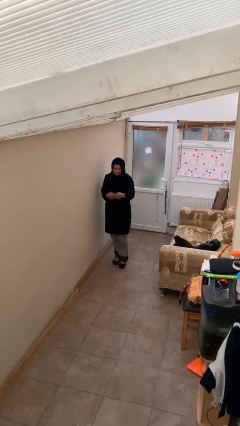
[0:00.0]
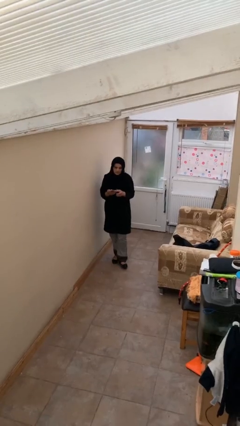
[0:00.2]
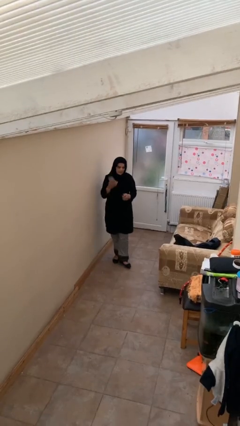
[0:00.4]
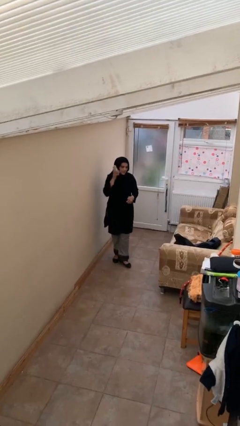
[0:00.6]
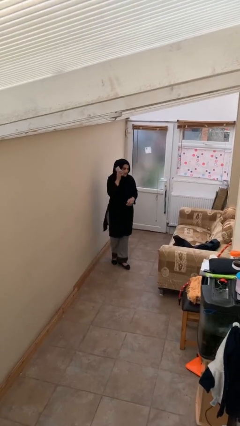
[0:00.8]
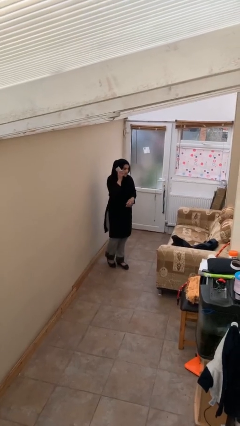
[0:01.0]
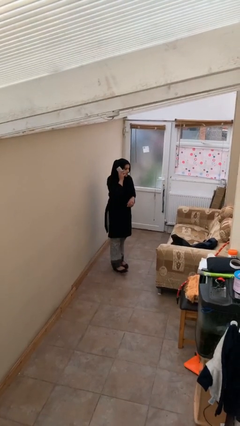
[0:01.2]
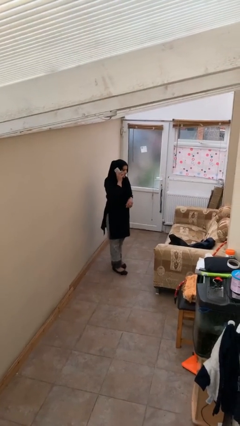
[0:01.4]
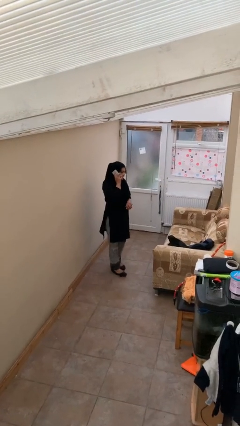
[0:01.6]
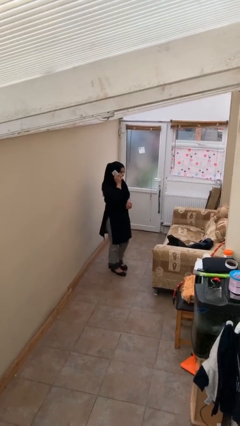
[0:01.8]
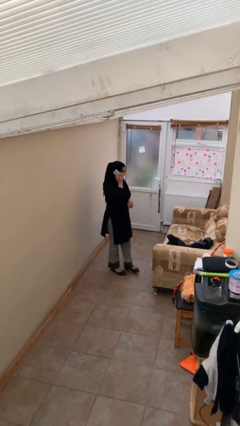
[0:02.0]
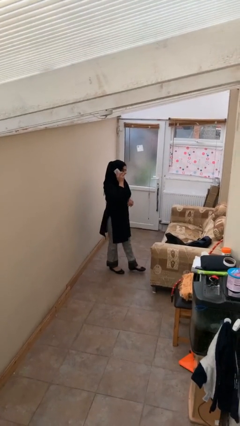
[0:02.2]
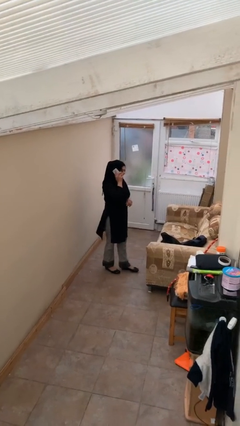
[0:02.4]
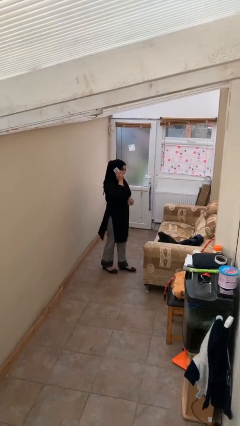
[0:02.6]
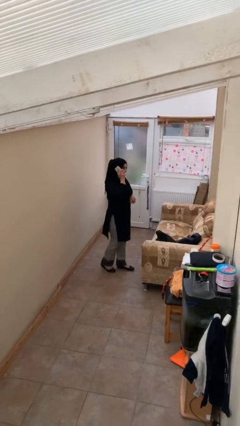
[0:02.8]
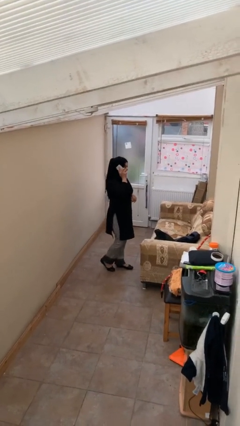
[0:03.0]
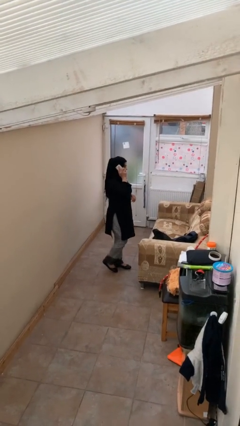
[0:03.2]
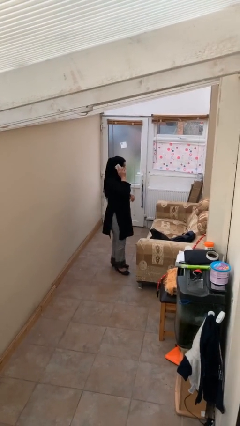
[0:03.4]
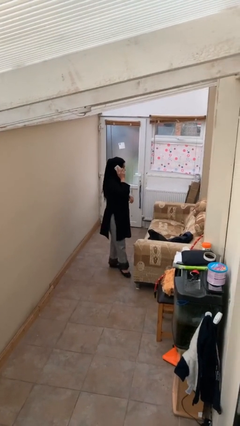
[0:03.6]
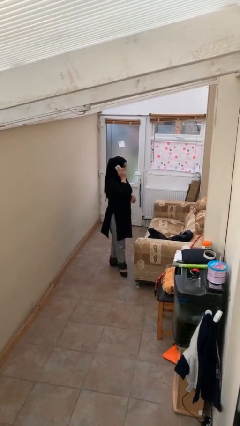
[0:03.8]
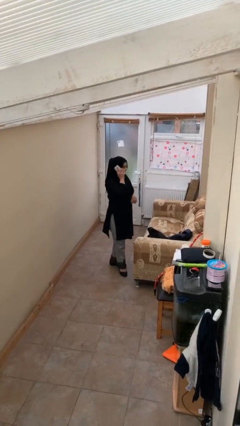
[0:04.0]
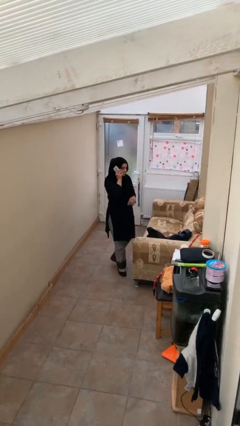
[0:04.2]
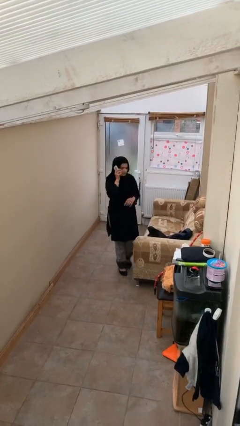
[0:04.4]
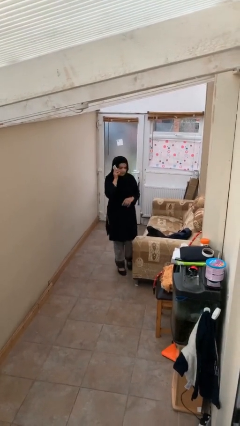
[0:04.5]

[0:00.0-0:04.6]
person talks on phone

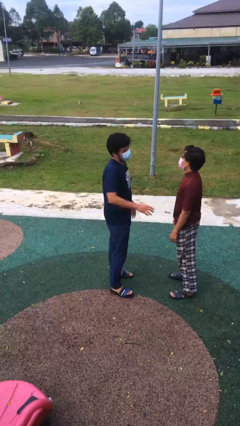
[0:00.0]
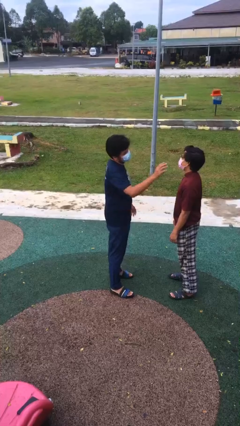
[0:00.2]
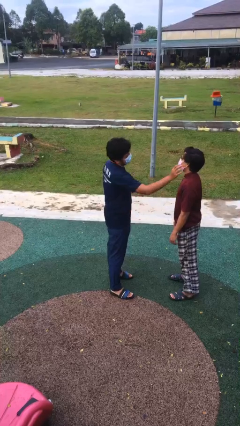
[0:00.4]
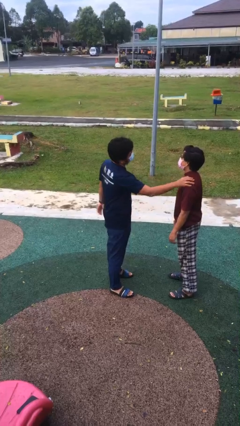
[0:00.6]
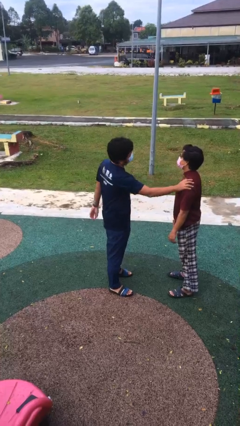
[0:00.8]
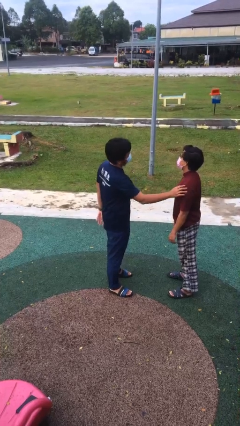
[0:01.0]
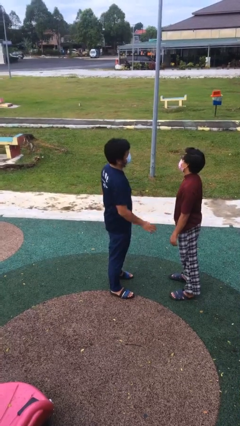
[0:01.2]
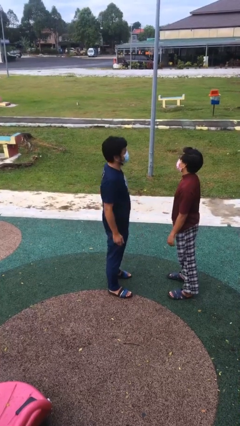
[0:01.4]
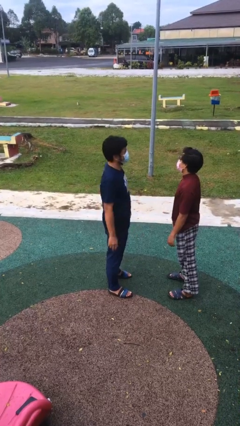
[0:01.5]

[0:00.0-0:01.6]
person pounds shoulders of person

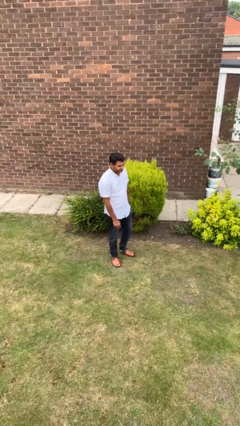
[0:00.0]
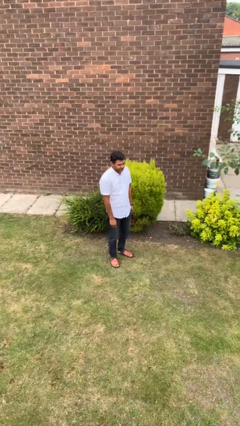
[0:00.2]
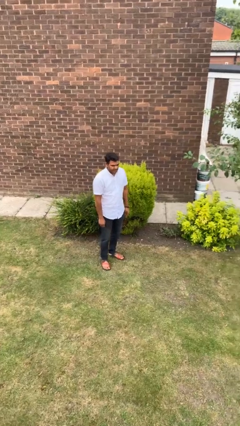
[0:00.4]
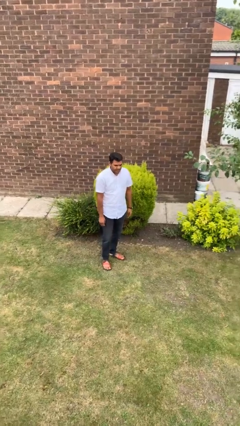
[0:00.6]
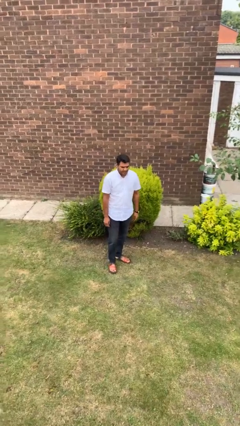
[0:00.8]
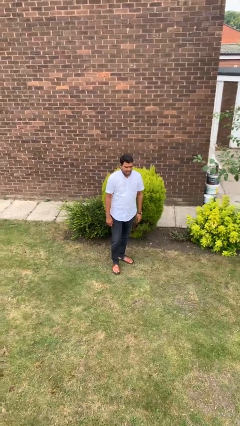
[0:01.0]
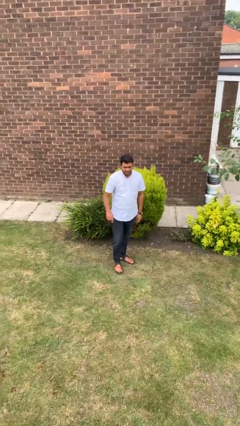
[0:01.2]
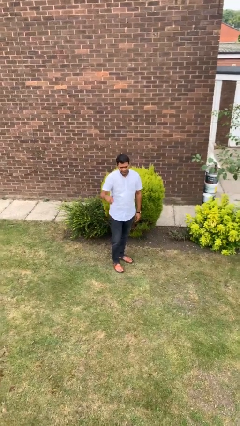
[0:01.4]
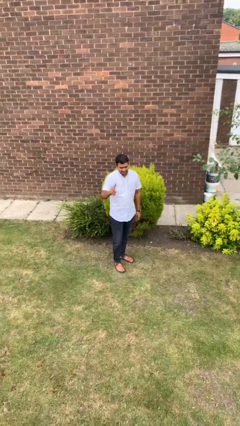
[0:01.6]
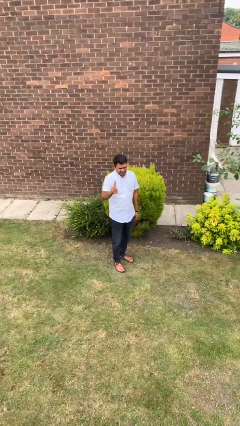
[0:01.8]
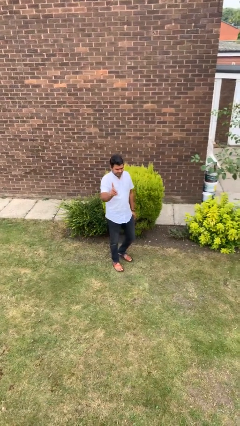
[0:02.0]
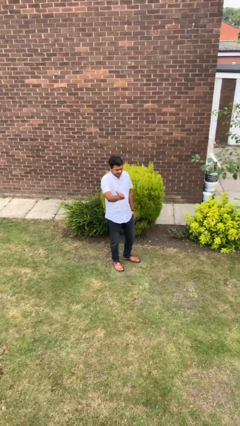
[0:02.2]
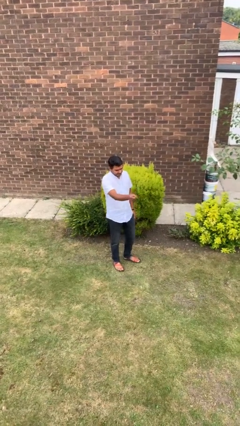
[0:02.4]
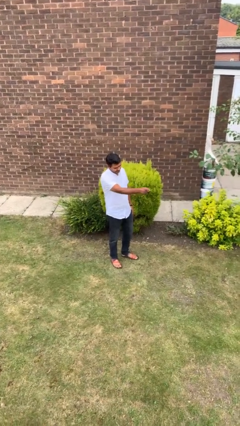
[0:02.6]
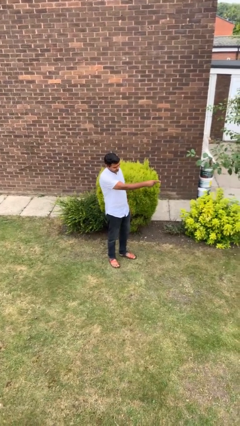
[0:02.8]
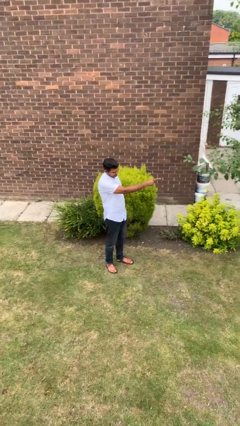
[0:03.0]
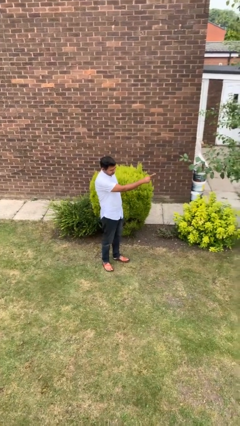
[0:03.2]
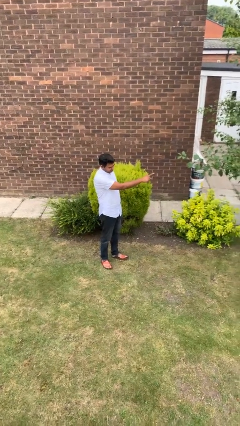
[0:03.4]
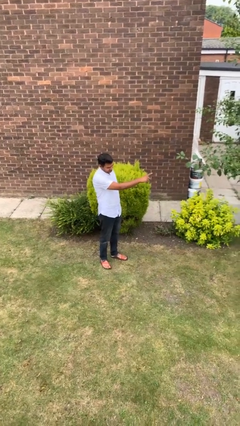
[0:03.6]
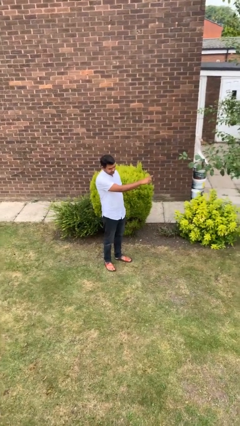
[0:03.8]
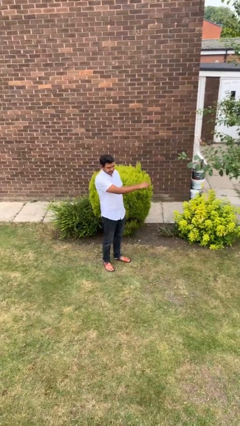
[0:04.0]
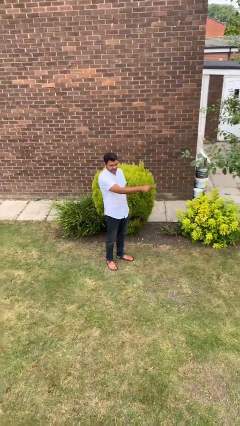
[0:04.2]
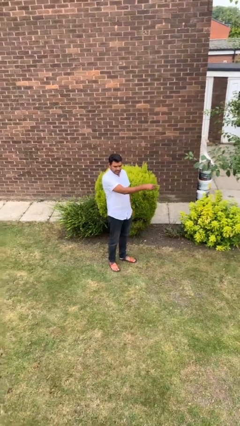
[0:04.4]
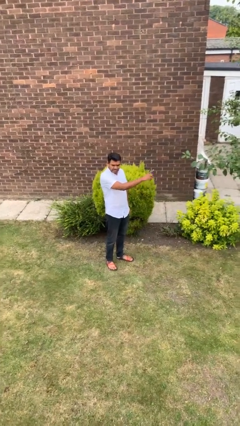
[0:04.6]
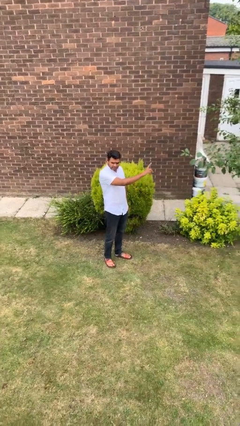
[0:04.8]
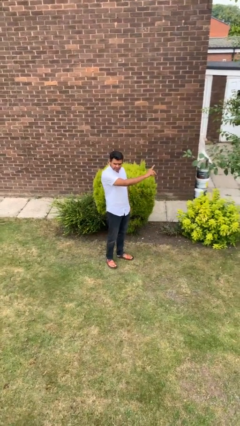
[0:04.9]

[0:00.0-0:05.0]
person gestures swipe left

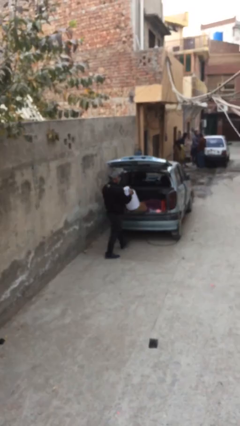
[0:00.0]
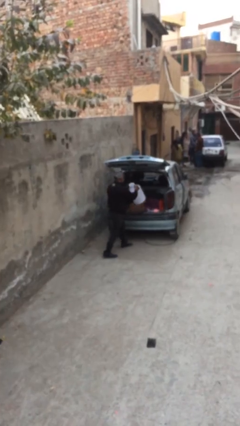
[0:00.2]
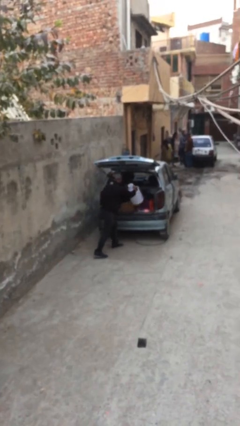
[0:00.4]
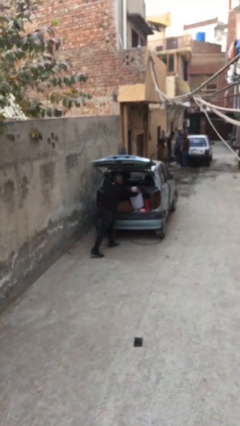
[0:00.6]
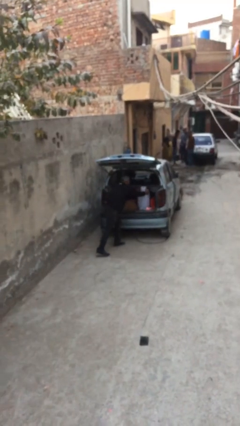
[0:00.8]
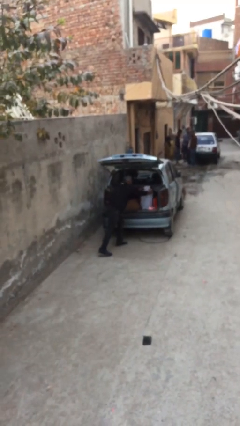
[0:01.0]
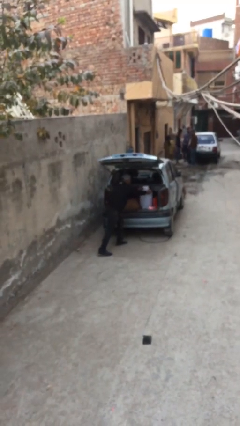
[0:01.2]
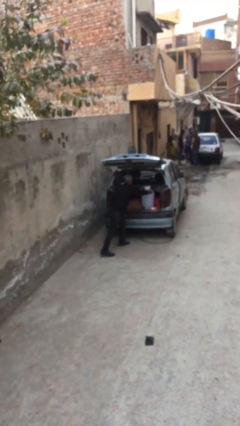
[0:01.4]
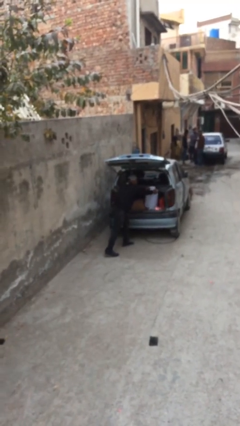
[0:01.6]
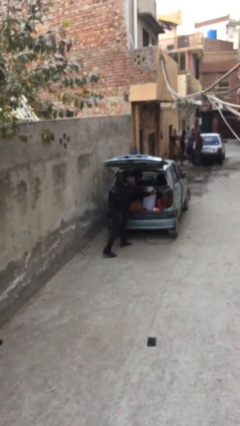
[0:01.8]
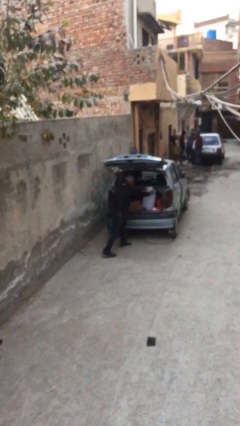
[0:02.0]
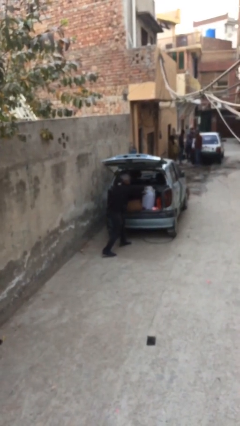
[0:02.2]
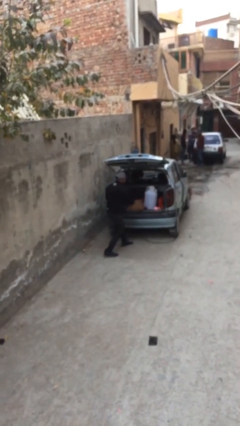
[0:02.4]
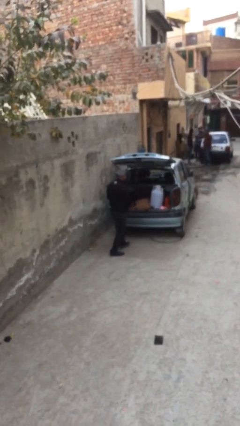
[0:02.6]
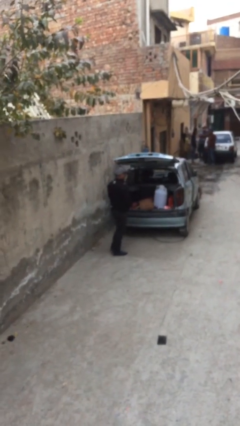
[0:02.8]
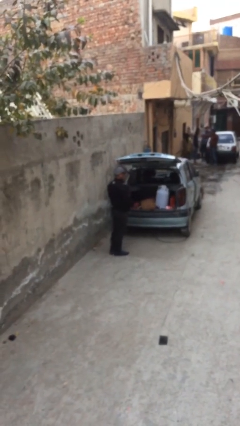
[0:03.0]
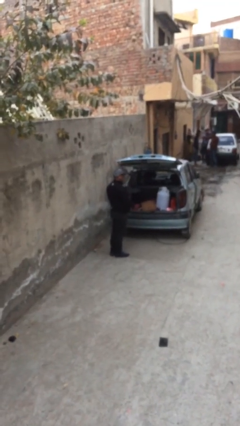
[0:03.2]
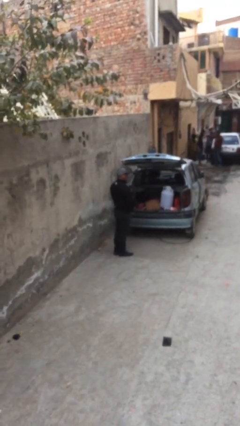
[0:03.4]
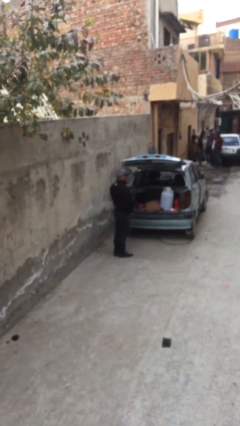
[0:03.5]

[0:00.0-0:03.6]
person loads car

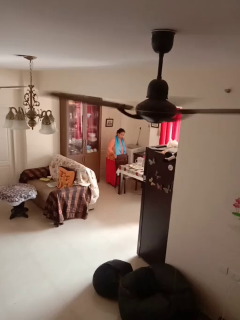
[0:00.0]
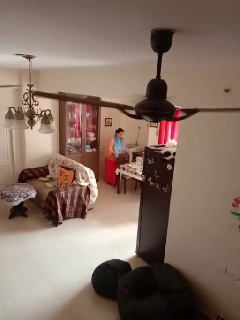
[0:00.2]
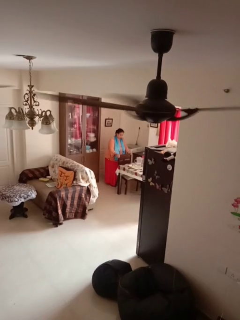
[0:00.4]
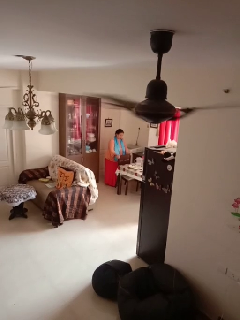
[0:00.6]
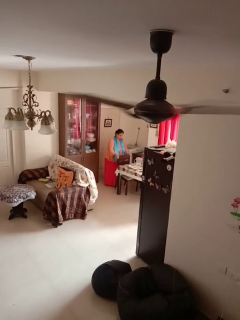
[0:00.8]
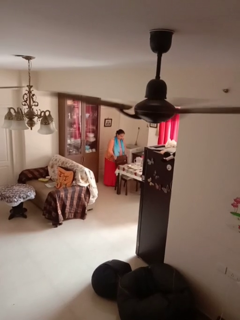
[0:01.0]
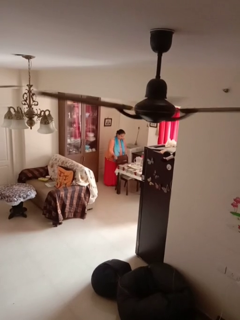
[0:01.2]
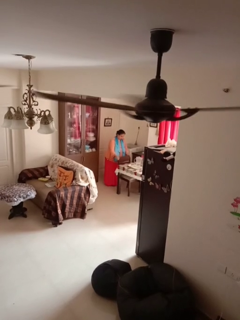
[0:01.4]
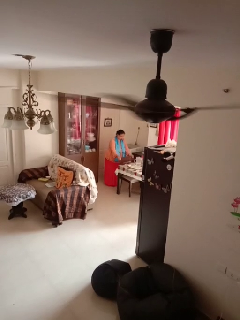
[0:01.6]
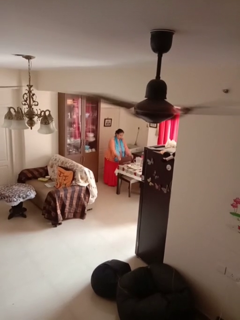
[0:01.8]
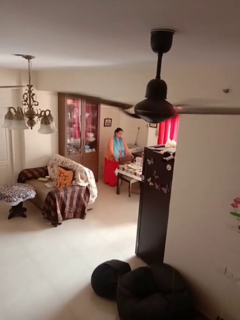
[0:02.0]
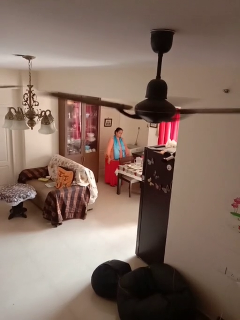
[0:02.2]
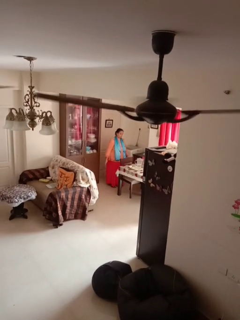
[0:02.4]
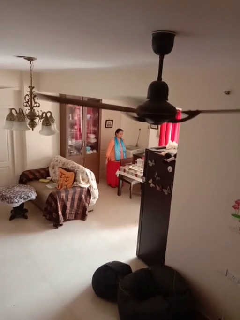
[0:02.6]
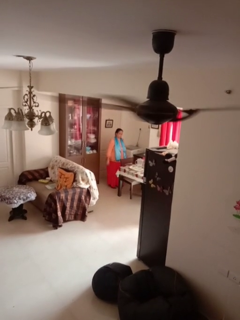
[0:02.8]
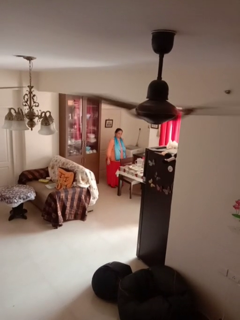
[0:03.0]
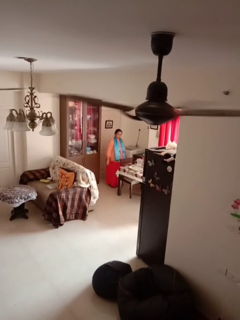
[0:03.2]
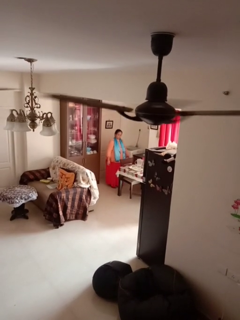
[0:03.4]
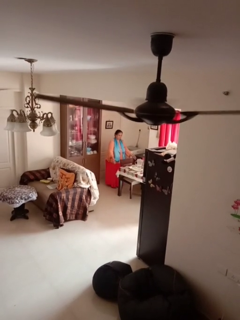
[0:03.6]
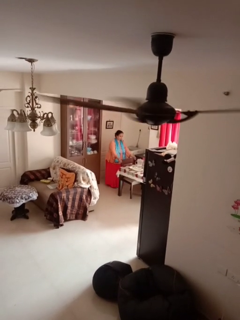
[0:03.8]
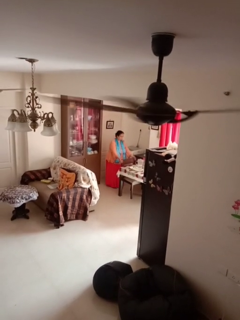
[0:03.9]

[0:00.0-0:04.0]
person pushes in chair
